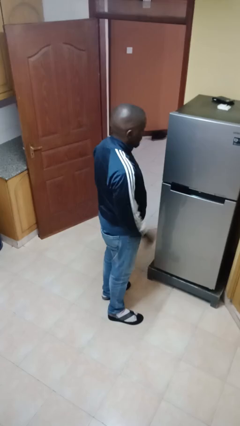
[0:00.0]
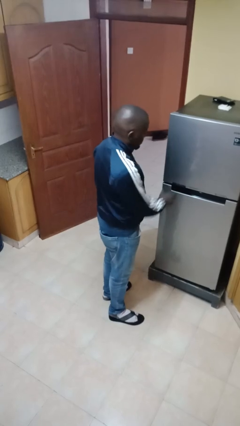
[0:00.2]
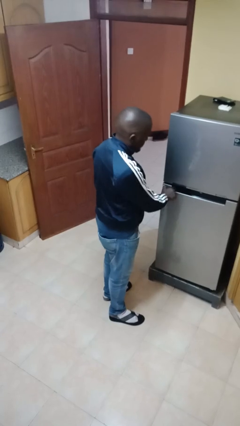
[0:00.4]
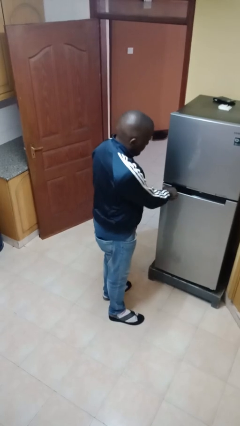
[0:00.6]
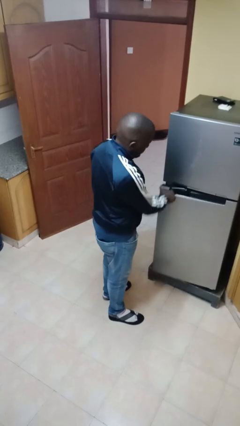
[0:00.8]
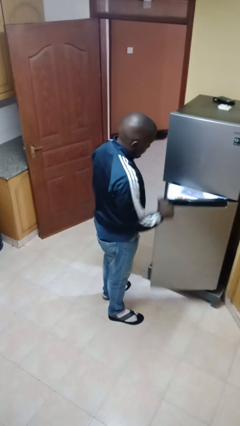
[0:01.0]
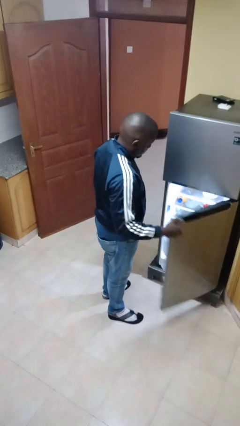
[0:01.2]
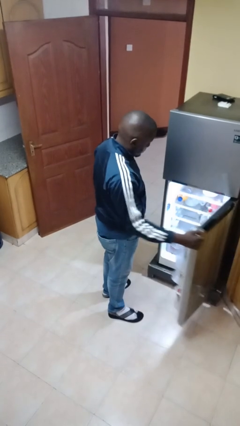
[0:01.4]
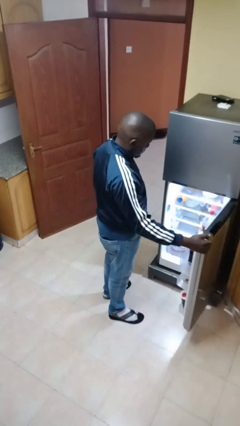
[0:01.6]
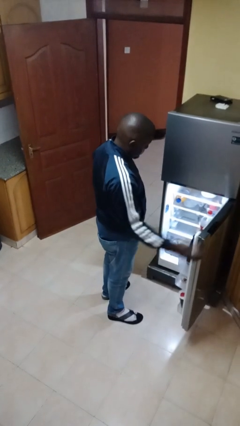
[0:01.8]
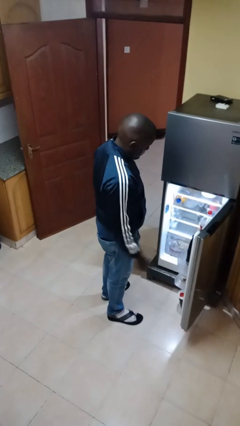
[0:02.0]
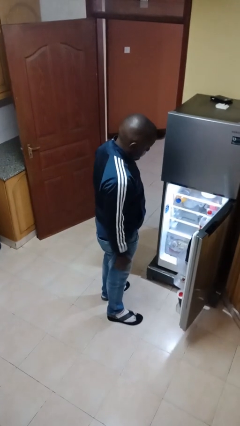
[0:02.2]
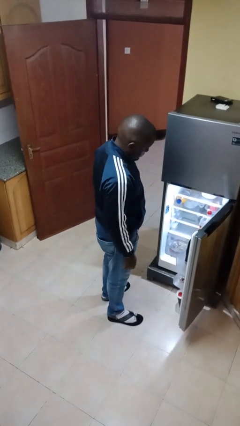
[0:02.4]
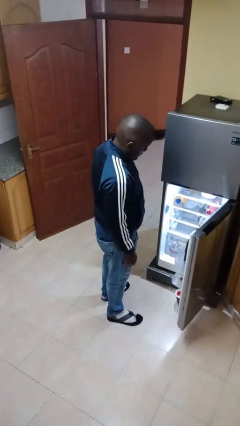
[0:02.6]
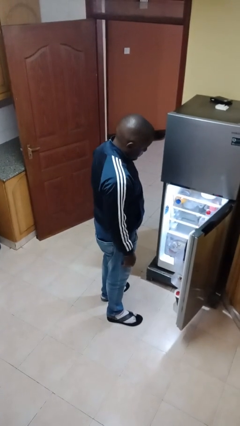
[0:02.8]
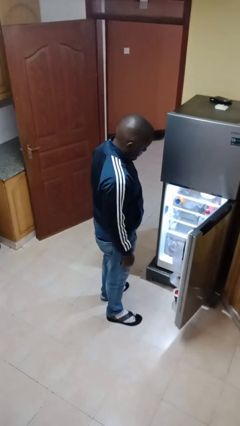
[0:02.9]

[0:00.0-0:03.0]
person opens refrigerator

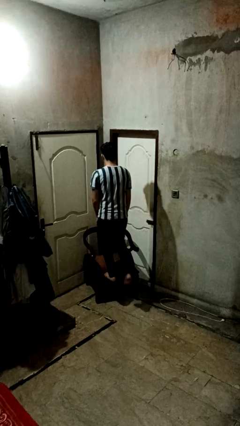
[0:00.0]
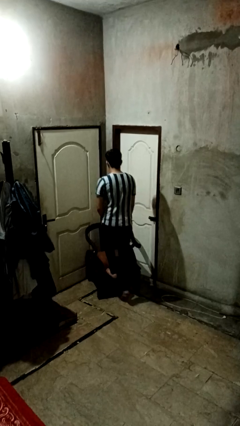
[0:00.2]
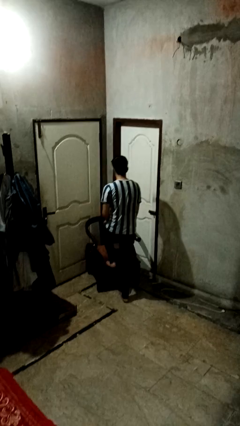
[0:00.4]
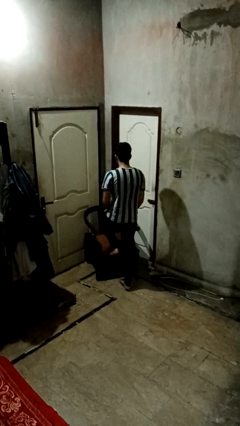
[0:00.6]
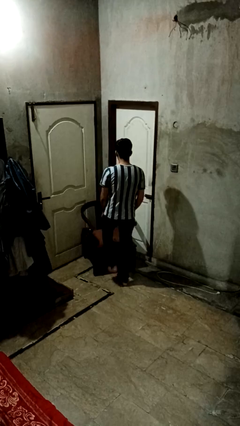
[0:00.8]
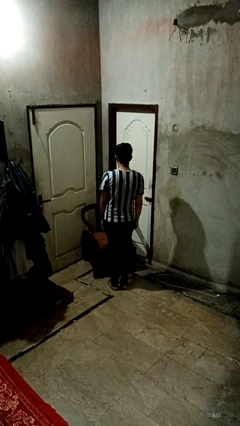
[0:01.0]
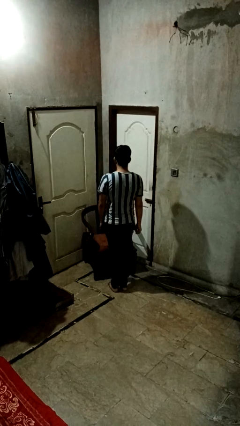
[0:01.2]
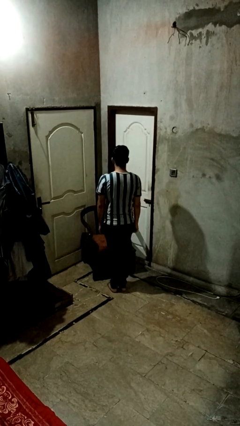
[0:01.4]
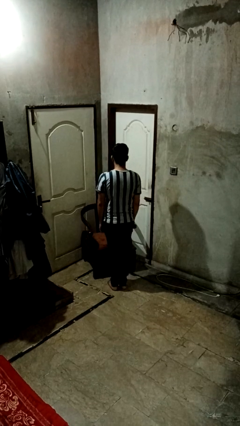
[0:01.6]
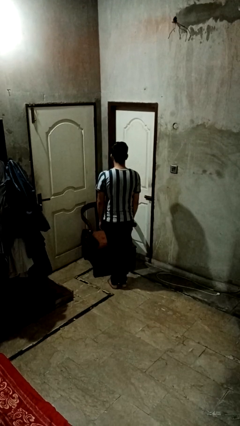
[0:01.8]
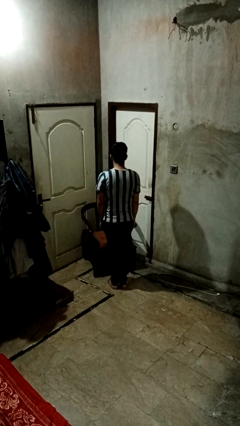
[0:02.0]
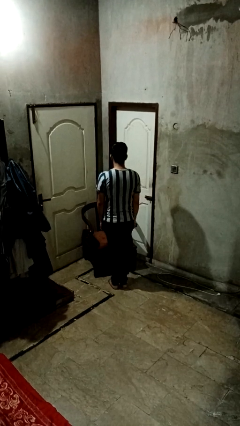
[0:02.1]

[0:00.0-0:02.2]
person climbs off couch

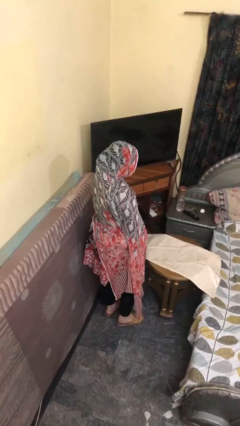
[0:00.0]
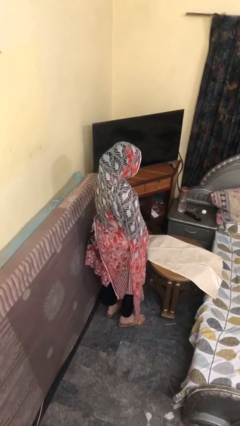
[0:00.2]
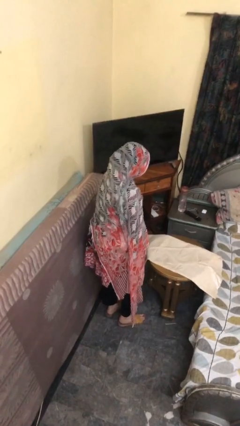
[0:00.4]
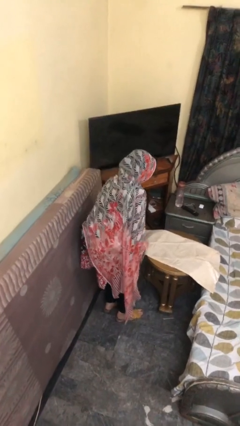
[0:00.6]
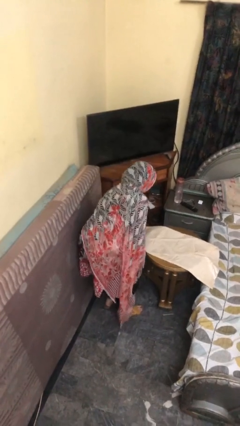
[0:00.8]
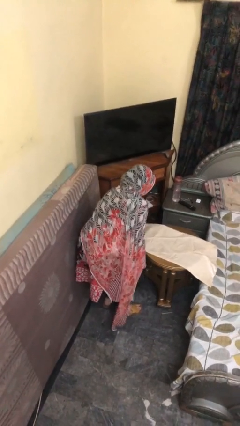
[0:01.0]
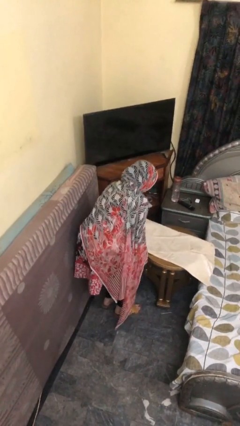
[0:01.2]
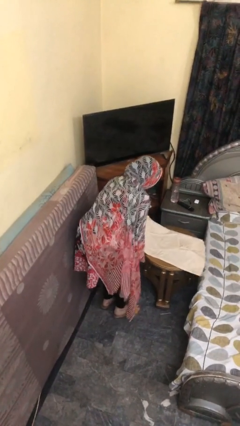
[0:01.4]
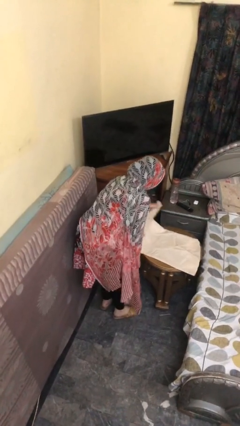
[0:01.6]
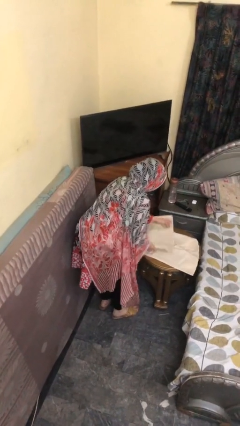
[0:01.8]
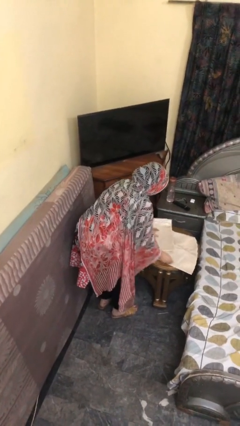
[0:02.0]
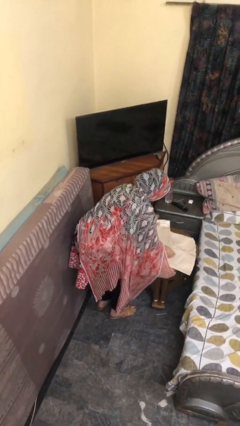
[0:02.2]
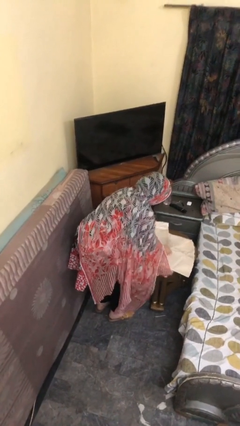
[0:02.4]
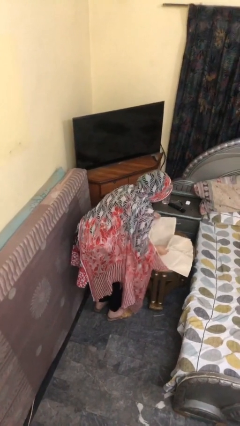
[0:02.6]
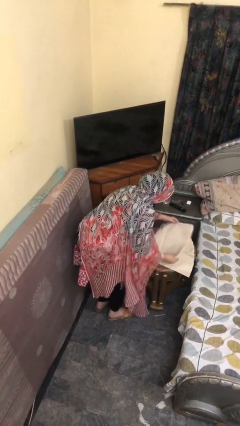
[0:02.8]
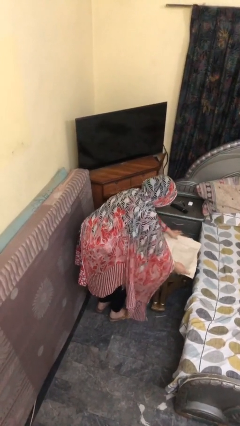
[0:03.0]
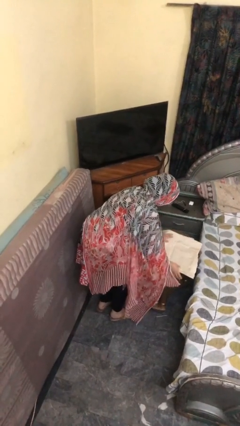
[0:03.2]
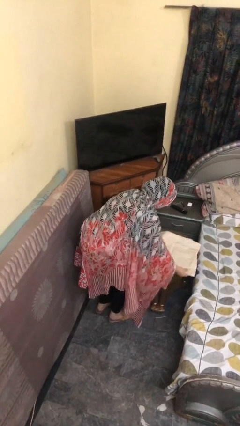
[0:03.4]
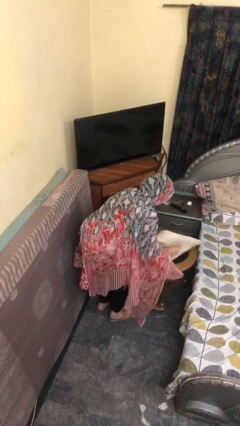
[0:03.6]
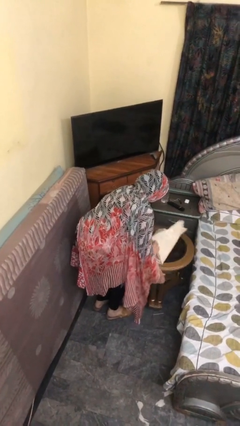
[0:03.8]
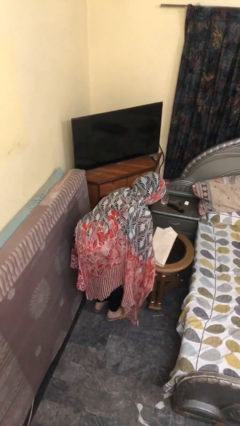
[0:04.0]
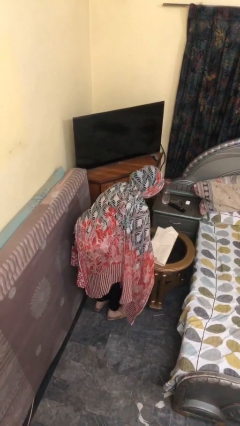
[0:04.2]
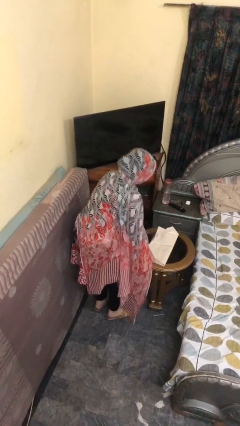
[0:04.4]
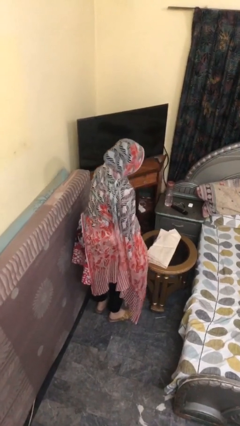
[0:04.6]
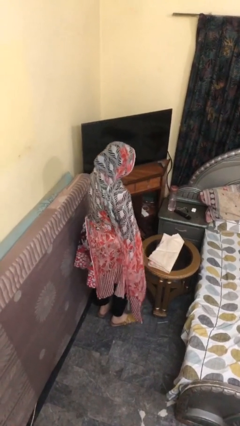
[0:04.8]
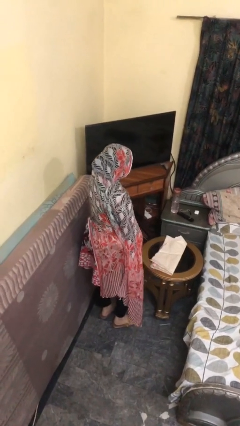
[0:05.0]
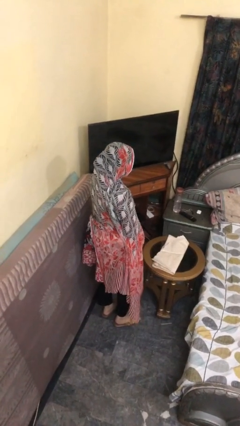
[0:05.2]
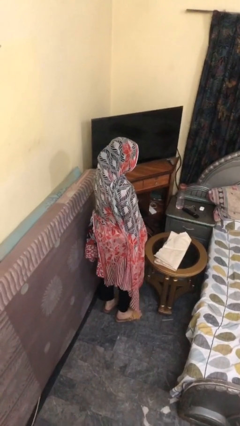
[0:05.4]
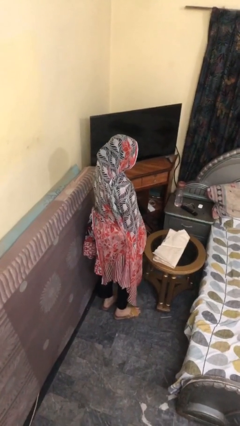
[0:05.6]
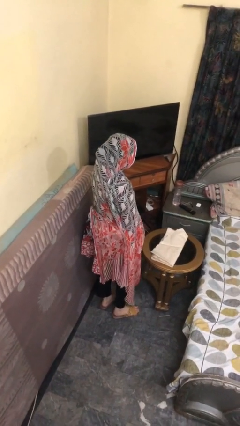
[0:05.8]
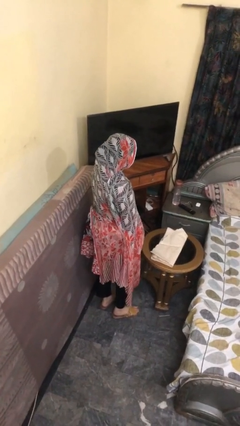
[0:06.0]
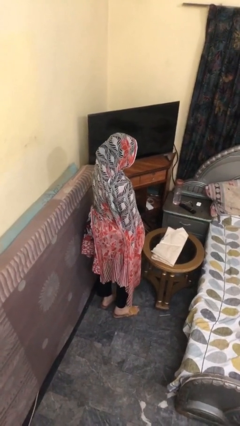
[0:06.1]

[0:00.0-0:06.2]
person folds tablecloth

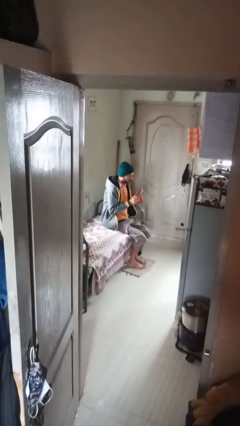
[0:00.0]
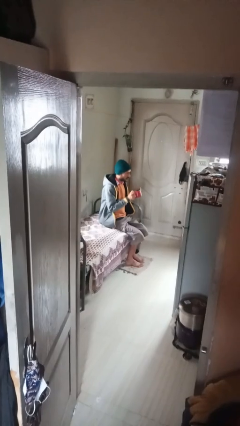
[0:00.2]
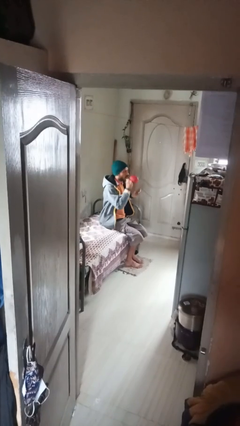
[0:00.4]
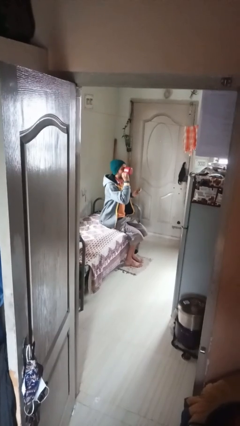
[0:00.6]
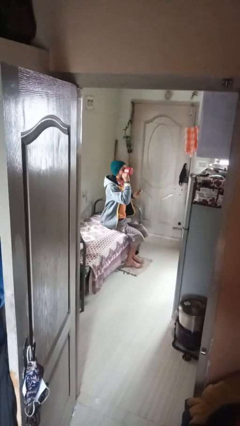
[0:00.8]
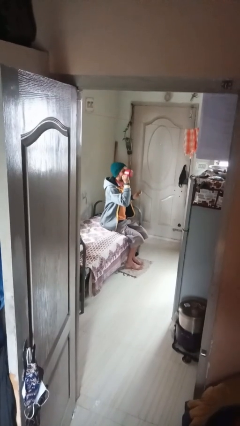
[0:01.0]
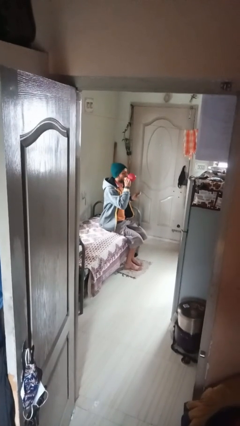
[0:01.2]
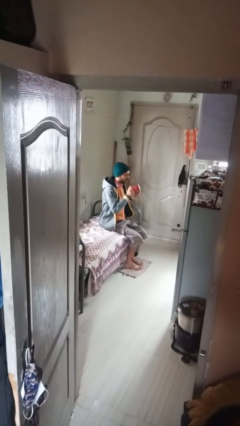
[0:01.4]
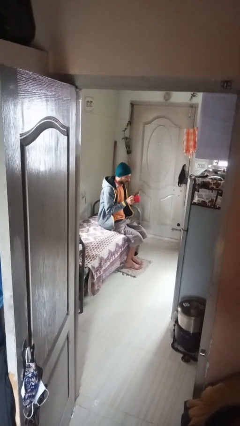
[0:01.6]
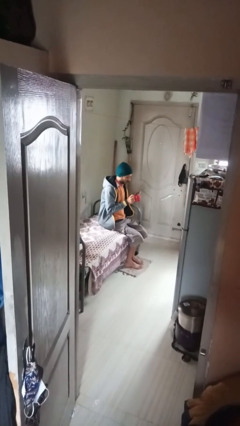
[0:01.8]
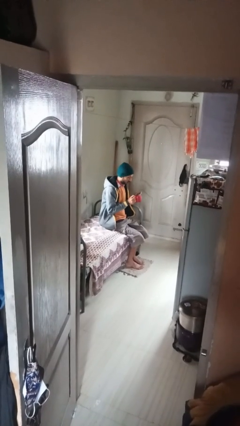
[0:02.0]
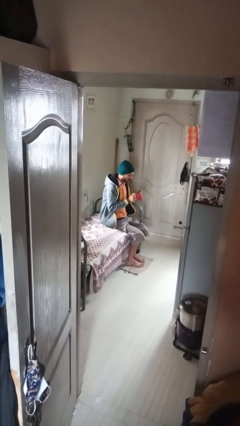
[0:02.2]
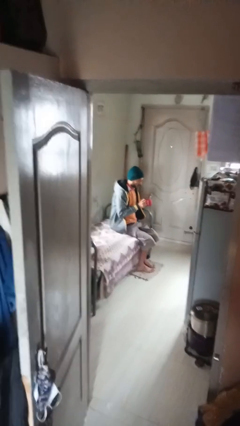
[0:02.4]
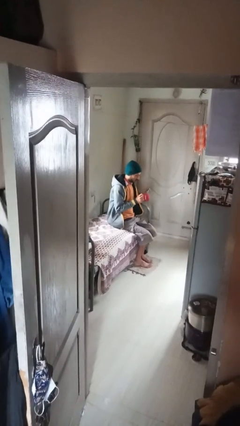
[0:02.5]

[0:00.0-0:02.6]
person drinks from mug

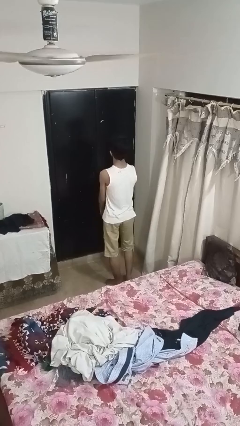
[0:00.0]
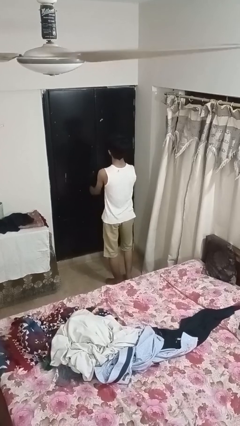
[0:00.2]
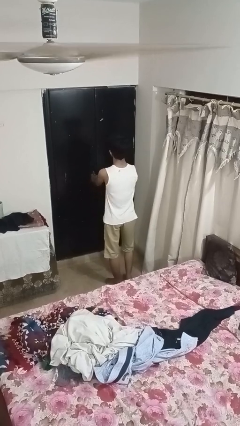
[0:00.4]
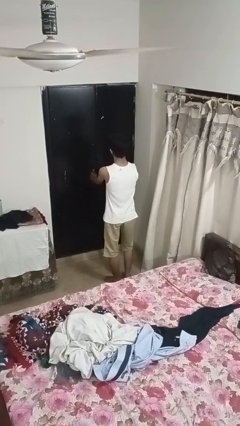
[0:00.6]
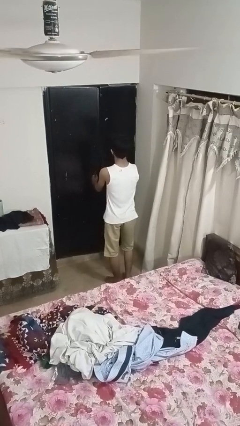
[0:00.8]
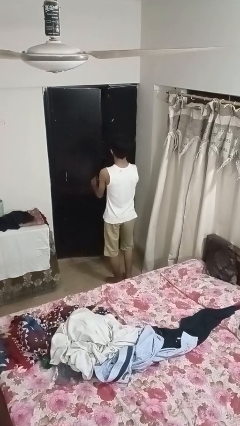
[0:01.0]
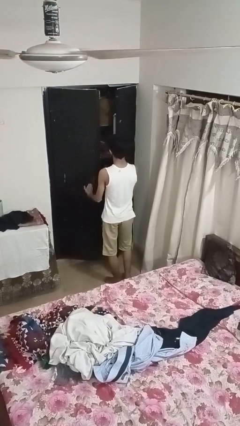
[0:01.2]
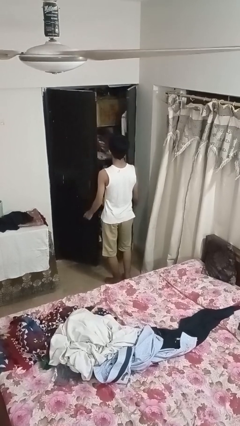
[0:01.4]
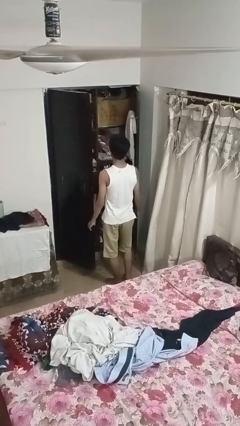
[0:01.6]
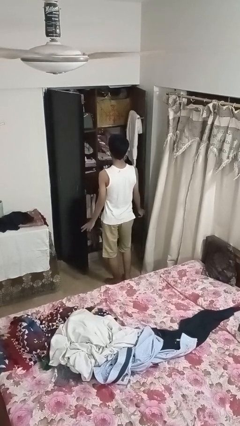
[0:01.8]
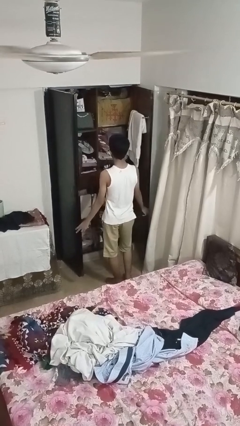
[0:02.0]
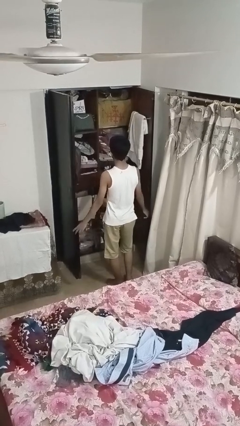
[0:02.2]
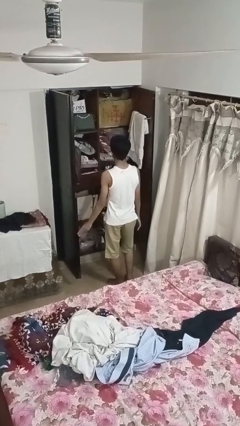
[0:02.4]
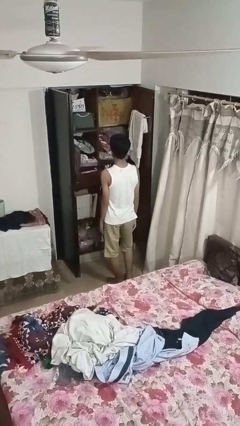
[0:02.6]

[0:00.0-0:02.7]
person opens closet door

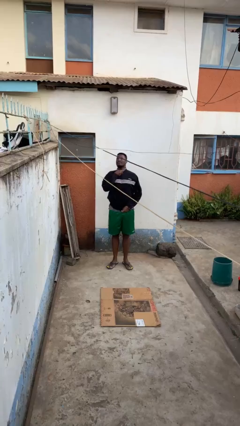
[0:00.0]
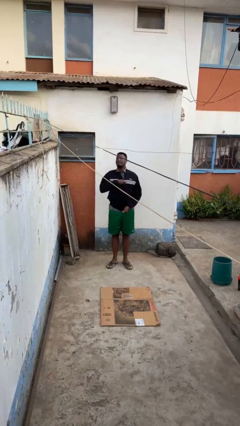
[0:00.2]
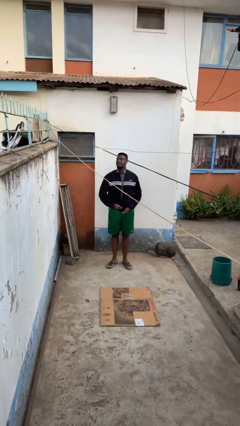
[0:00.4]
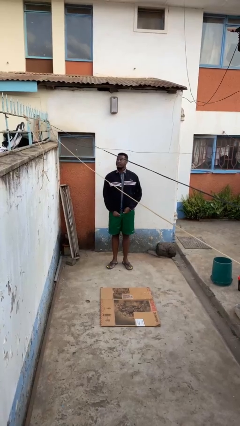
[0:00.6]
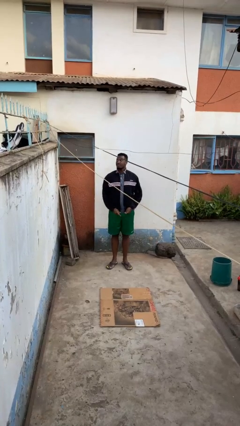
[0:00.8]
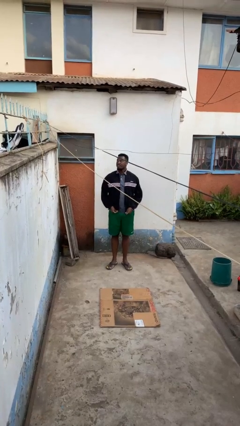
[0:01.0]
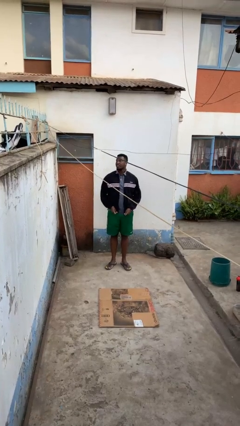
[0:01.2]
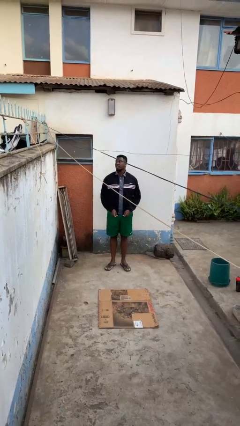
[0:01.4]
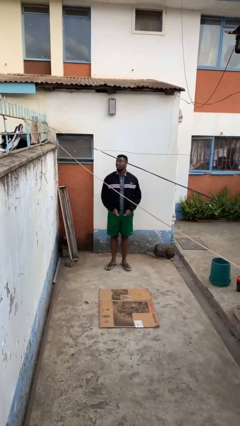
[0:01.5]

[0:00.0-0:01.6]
person unzips jacket
